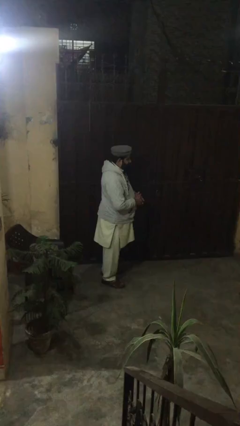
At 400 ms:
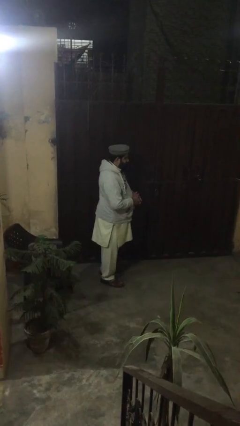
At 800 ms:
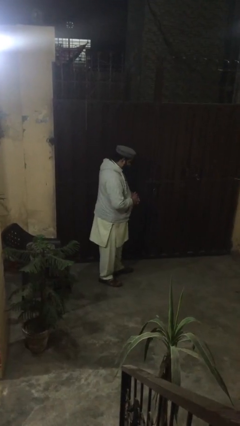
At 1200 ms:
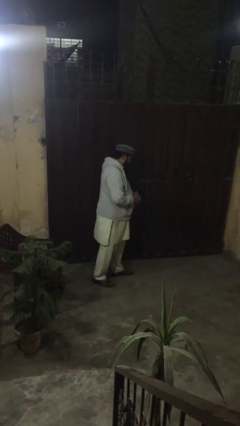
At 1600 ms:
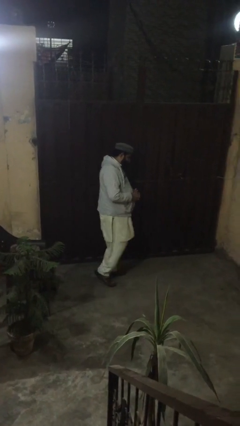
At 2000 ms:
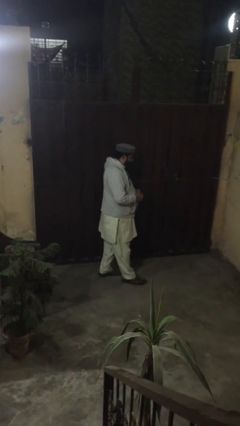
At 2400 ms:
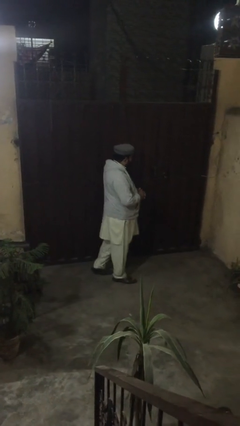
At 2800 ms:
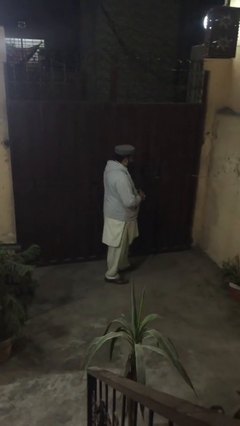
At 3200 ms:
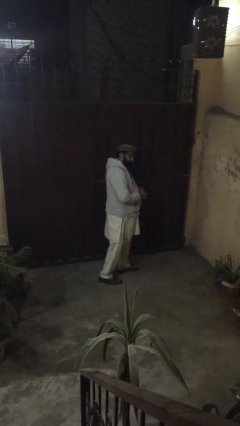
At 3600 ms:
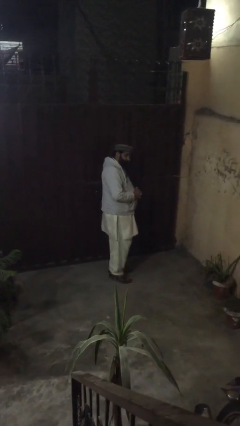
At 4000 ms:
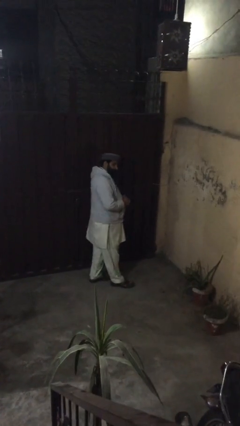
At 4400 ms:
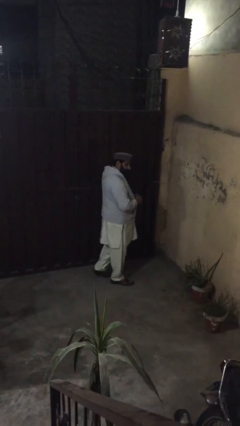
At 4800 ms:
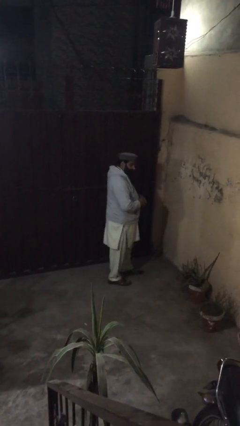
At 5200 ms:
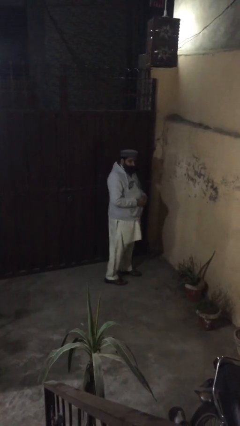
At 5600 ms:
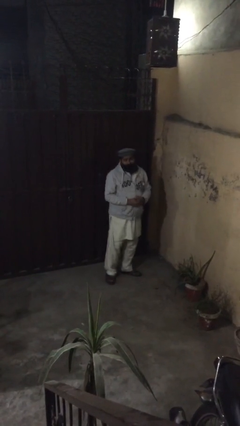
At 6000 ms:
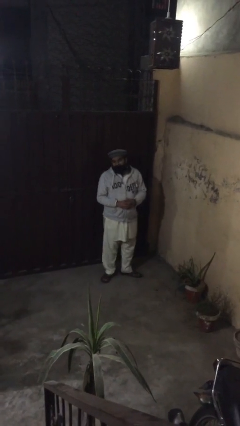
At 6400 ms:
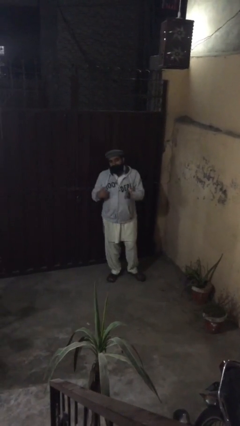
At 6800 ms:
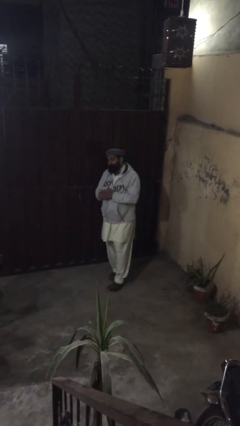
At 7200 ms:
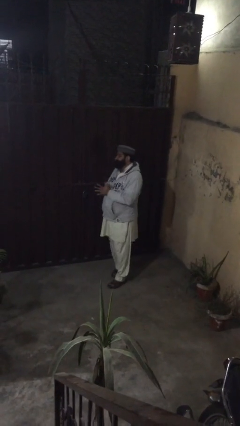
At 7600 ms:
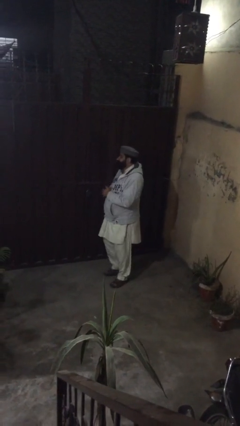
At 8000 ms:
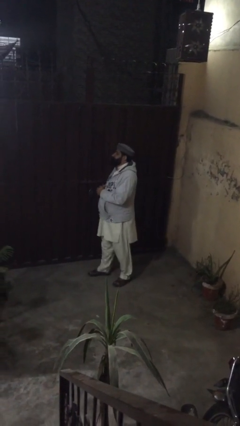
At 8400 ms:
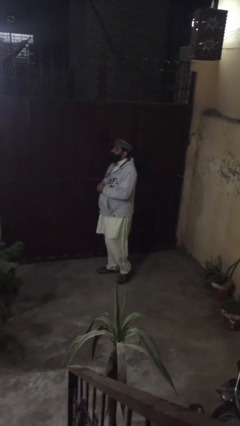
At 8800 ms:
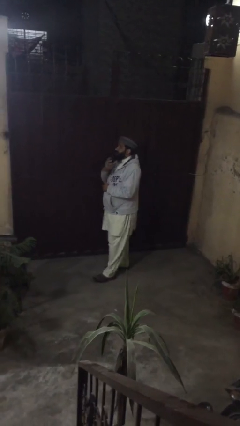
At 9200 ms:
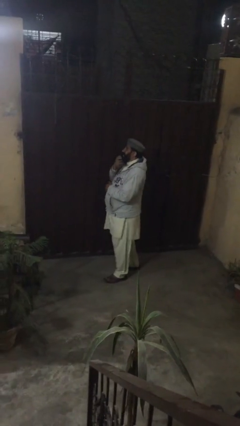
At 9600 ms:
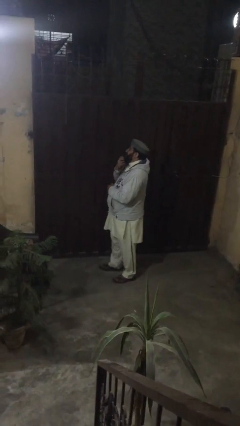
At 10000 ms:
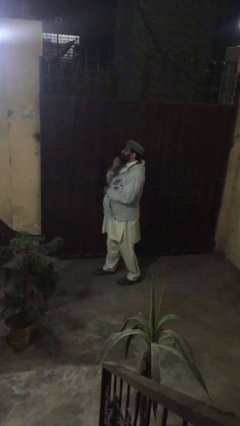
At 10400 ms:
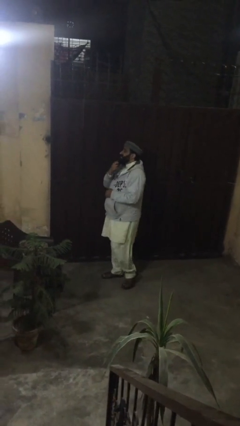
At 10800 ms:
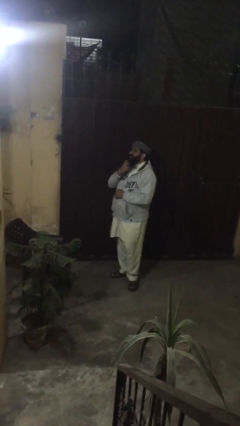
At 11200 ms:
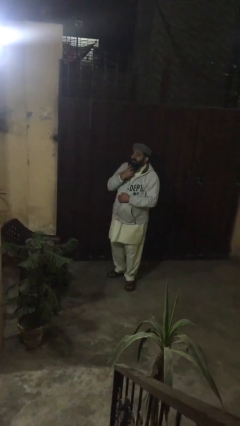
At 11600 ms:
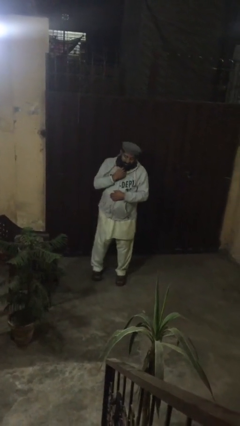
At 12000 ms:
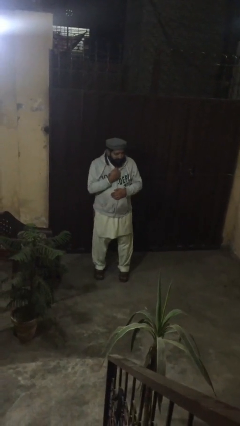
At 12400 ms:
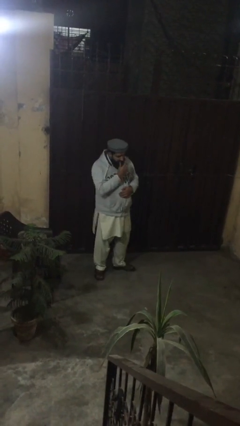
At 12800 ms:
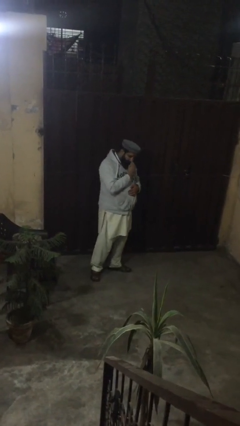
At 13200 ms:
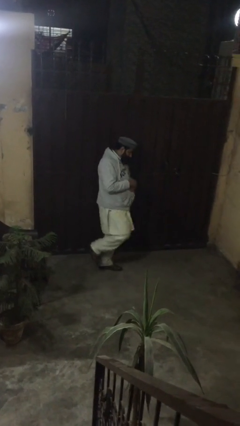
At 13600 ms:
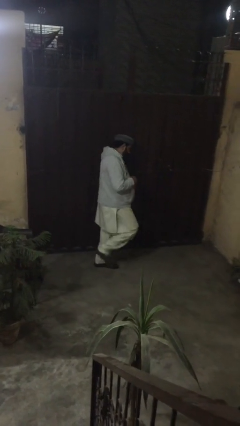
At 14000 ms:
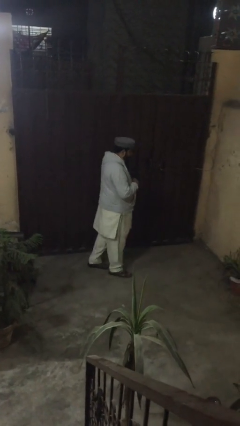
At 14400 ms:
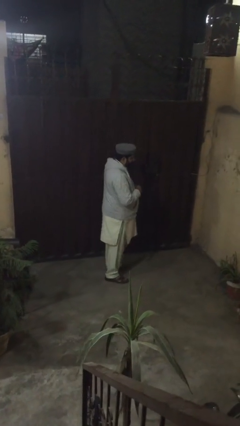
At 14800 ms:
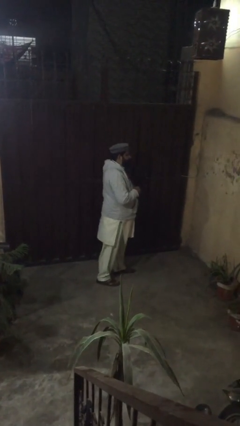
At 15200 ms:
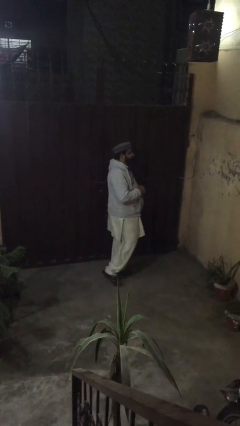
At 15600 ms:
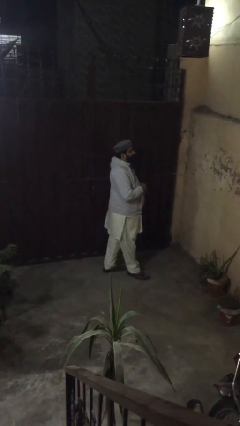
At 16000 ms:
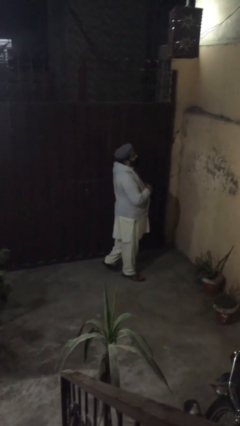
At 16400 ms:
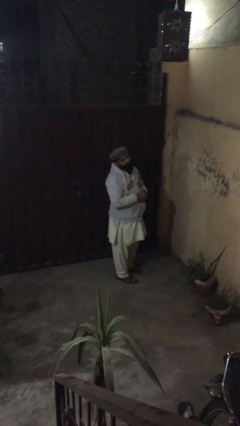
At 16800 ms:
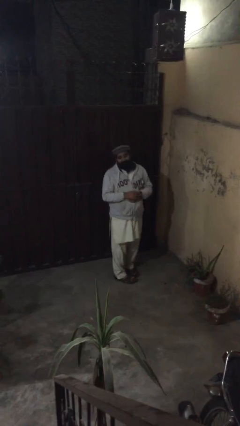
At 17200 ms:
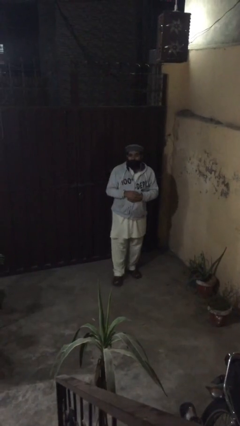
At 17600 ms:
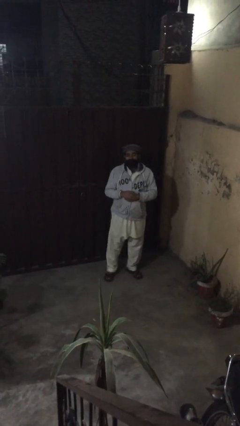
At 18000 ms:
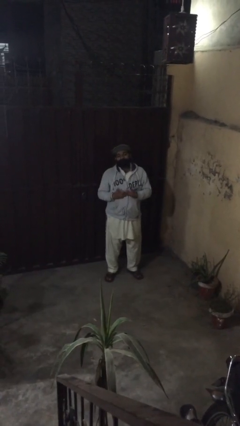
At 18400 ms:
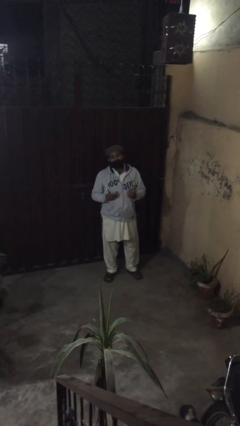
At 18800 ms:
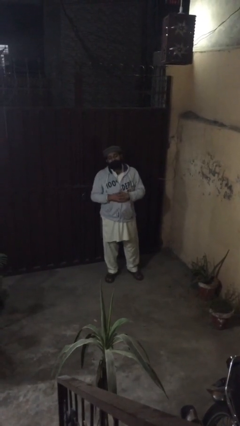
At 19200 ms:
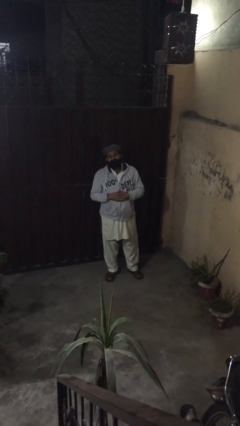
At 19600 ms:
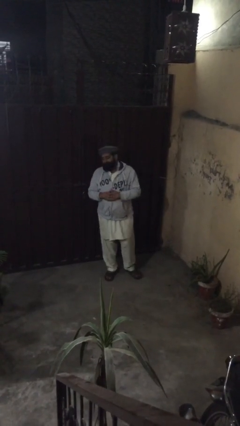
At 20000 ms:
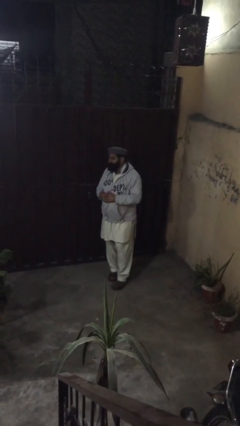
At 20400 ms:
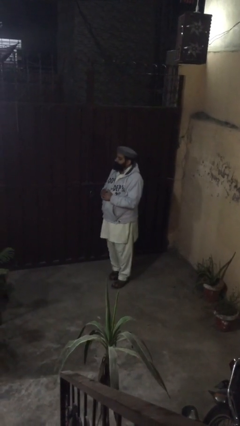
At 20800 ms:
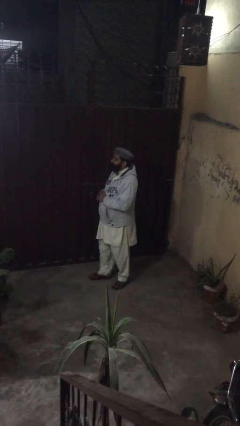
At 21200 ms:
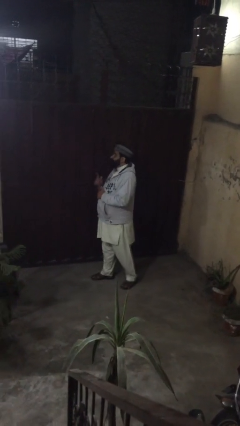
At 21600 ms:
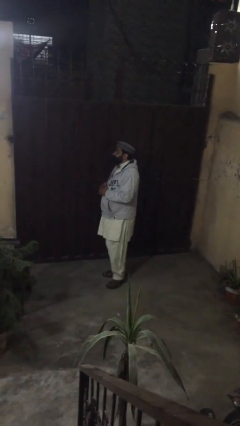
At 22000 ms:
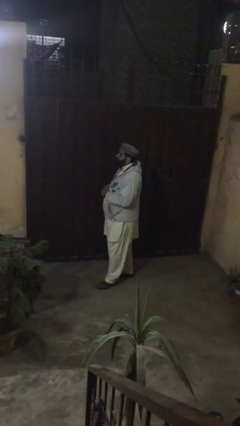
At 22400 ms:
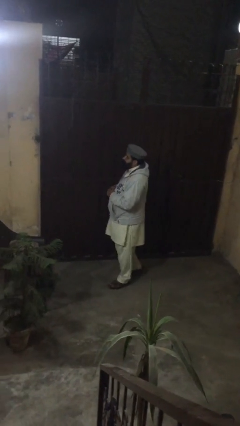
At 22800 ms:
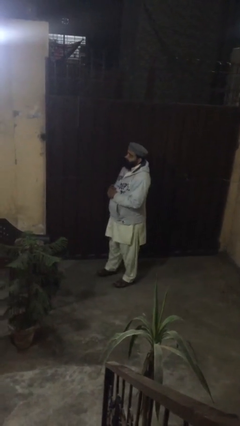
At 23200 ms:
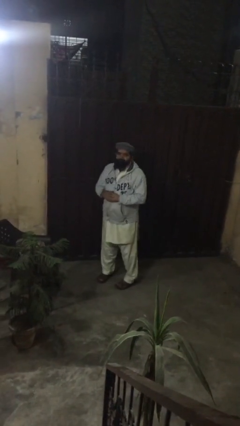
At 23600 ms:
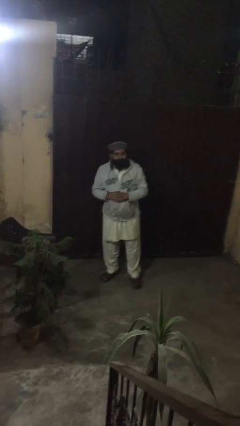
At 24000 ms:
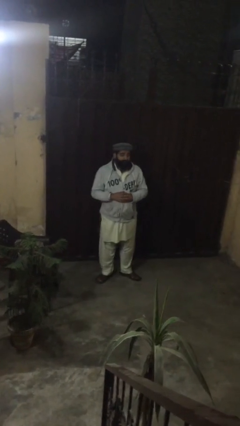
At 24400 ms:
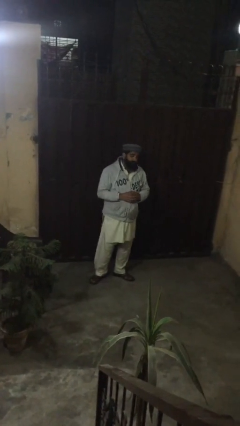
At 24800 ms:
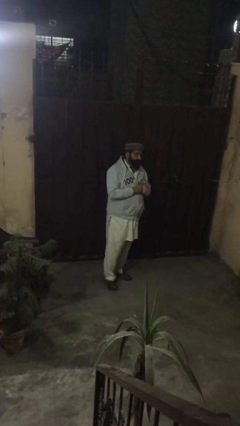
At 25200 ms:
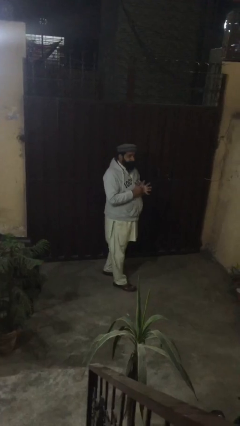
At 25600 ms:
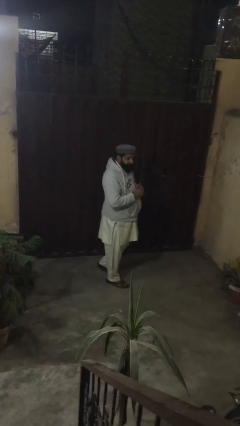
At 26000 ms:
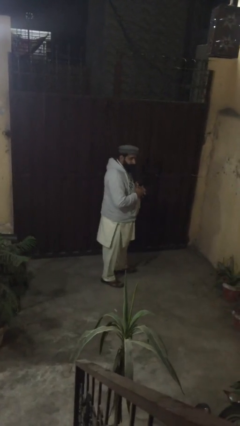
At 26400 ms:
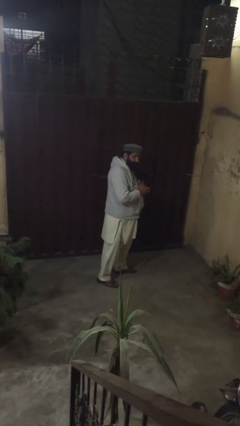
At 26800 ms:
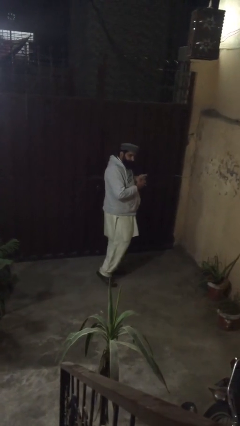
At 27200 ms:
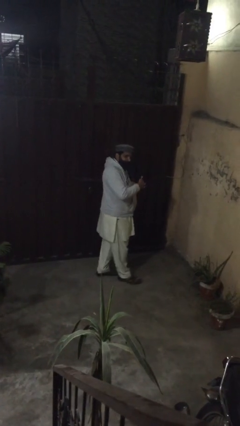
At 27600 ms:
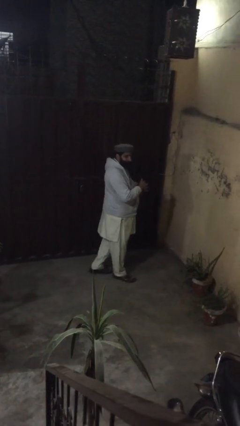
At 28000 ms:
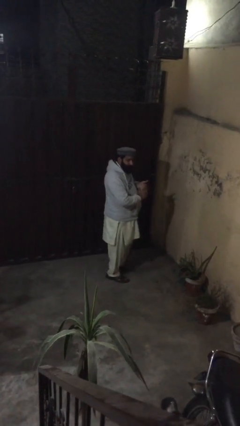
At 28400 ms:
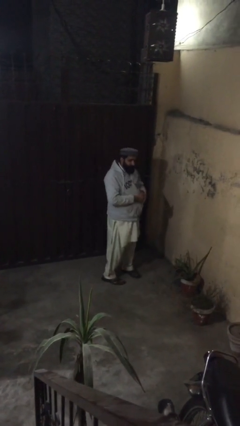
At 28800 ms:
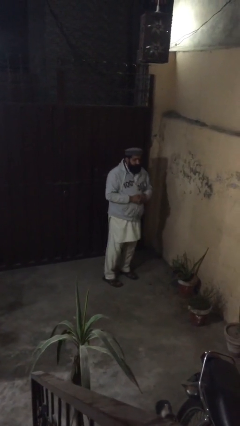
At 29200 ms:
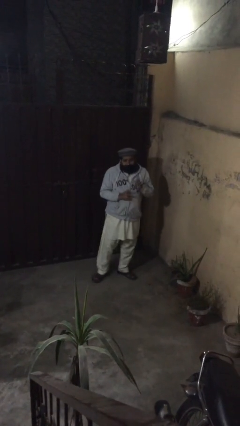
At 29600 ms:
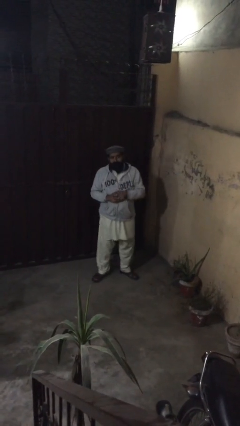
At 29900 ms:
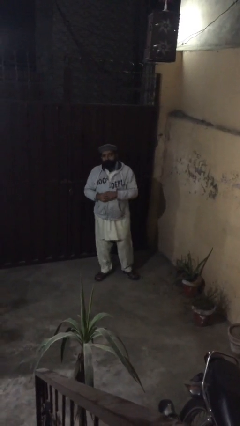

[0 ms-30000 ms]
person walks

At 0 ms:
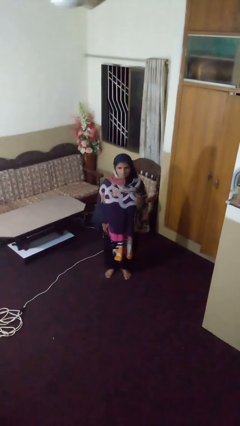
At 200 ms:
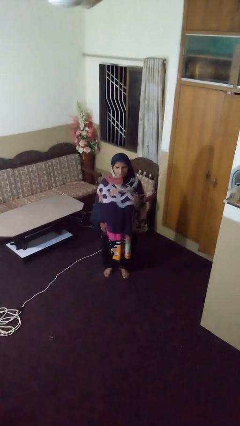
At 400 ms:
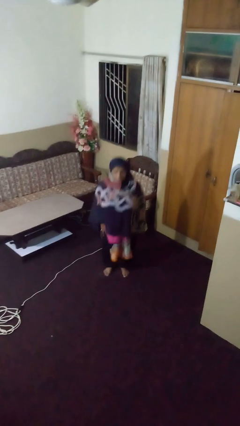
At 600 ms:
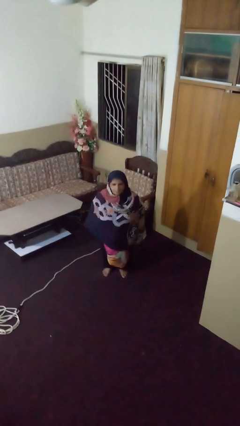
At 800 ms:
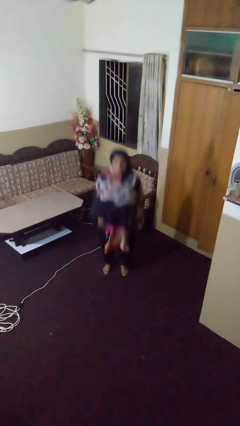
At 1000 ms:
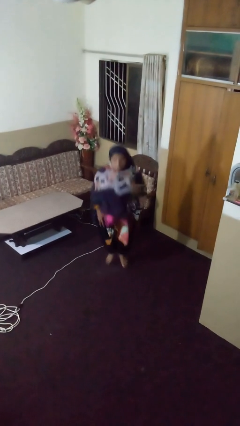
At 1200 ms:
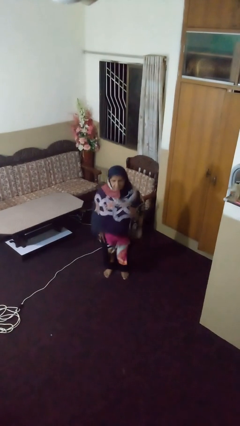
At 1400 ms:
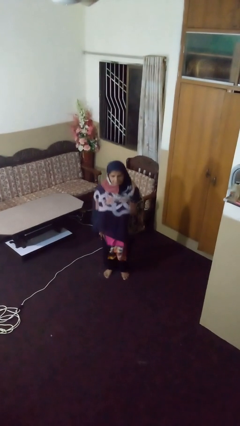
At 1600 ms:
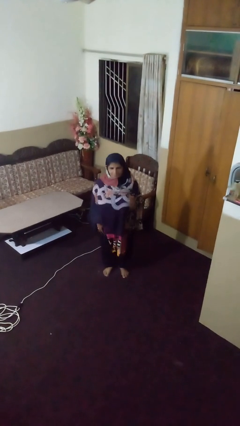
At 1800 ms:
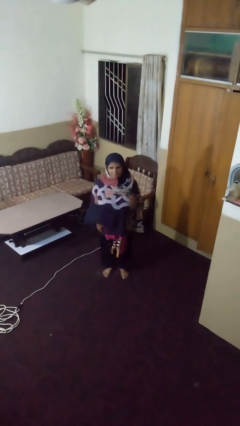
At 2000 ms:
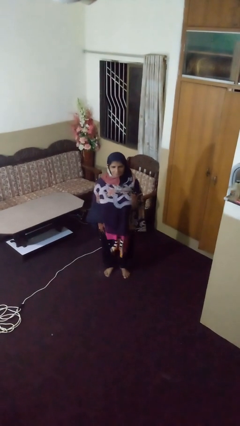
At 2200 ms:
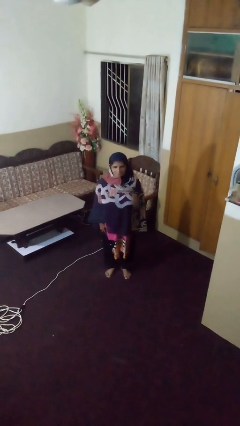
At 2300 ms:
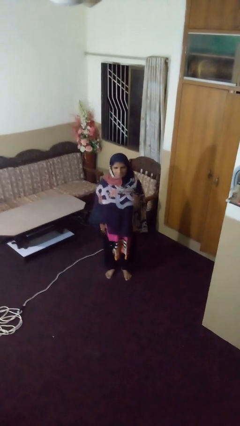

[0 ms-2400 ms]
person jumps

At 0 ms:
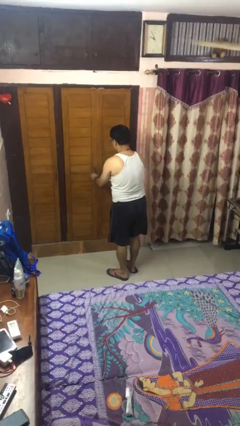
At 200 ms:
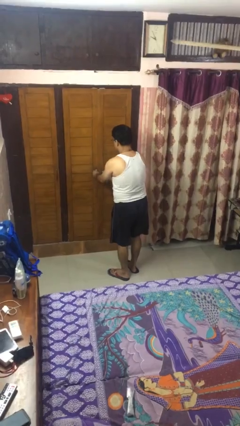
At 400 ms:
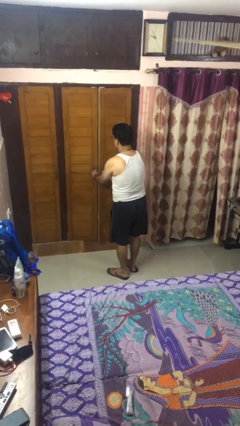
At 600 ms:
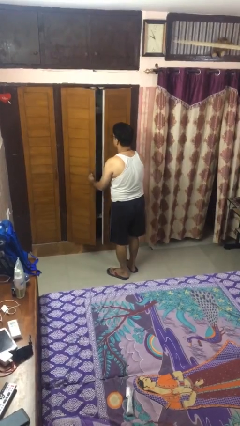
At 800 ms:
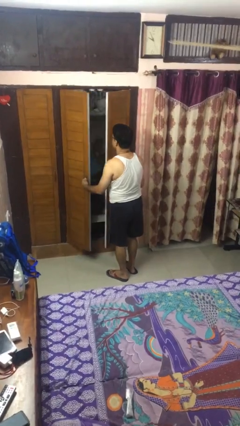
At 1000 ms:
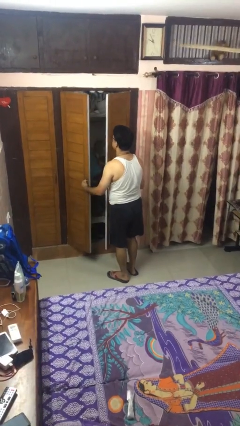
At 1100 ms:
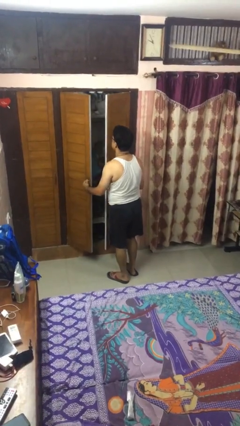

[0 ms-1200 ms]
person opens facility door
